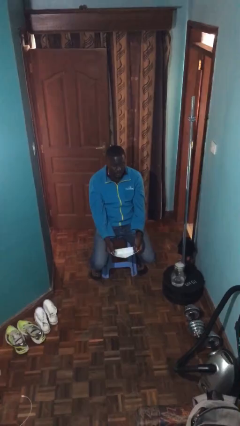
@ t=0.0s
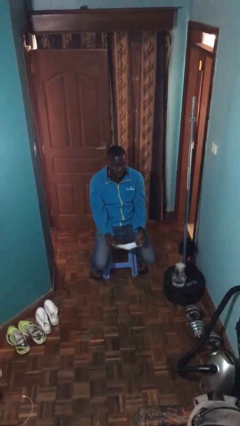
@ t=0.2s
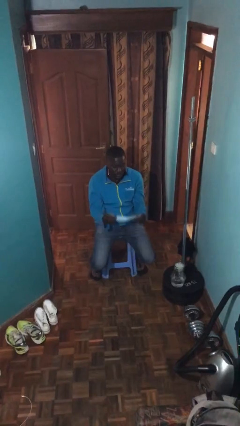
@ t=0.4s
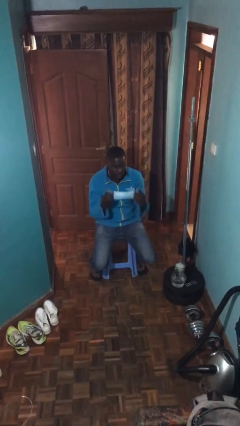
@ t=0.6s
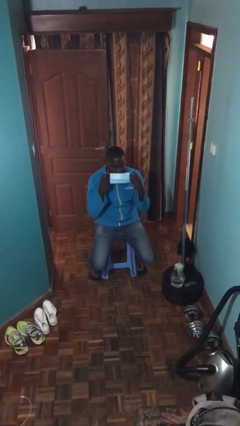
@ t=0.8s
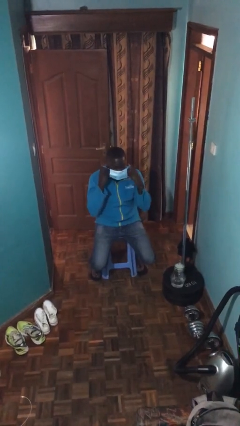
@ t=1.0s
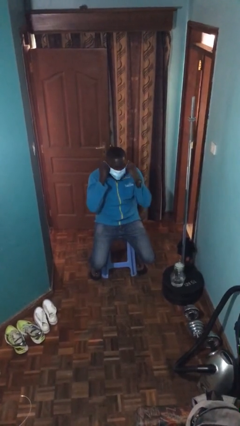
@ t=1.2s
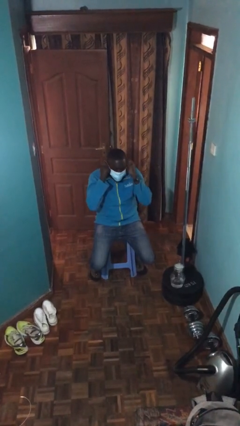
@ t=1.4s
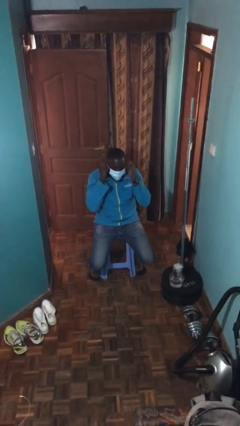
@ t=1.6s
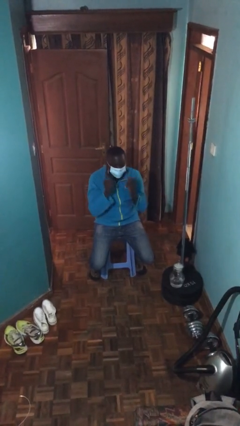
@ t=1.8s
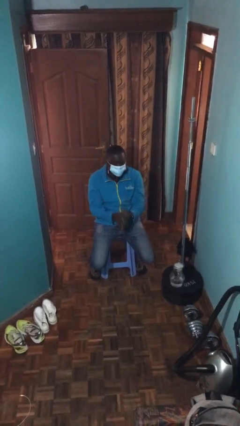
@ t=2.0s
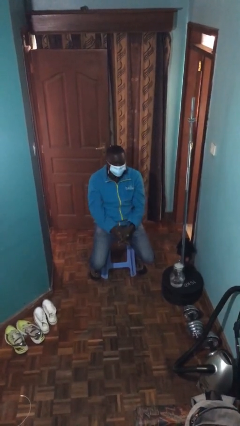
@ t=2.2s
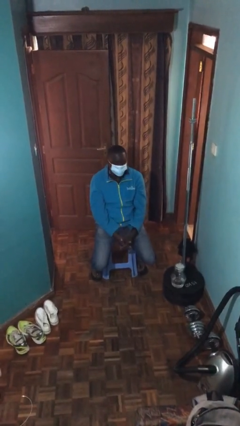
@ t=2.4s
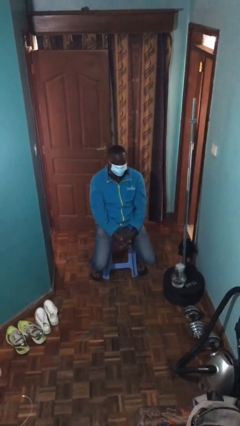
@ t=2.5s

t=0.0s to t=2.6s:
person puts on facemask

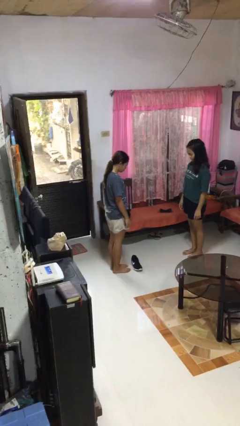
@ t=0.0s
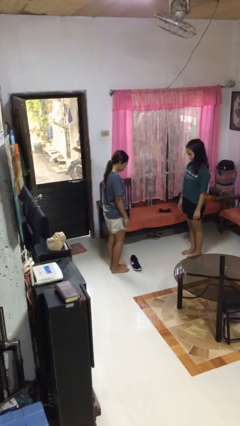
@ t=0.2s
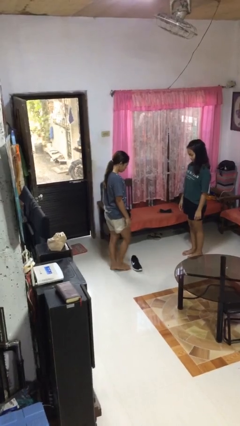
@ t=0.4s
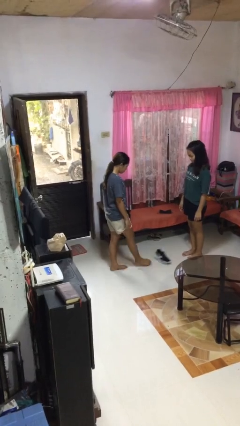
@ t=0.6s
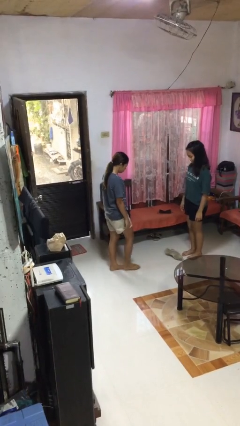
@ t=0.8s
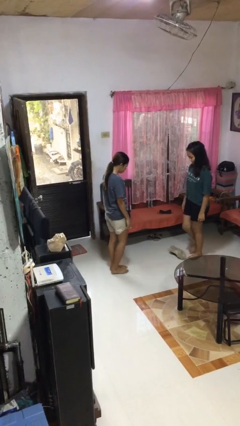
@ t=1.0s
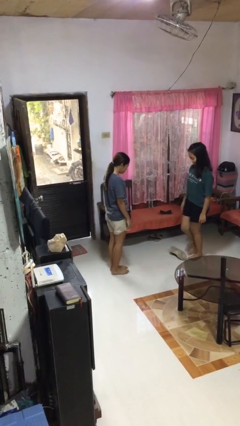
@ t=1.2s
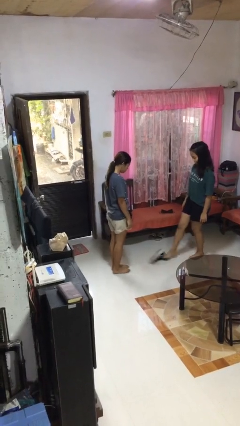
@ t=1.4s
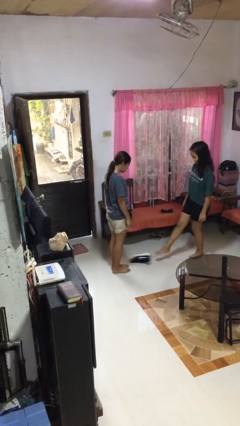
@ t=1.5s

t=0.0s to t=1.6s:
person kicks object to person

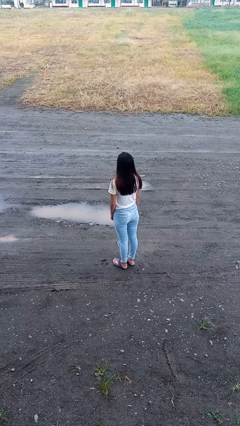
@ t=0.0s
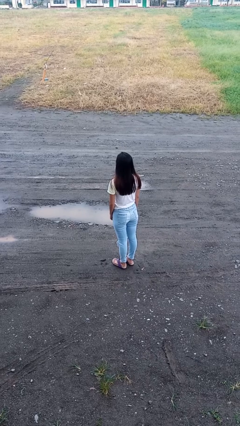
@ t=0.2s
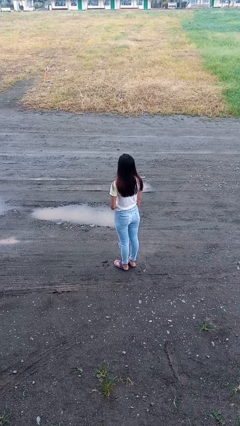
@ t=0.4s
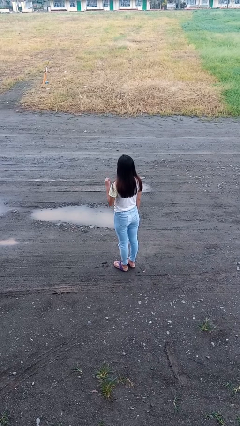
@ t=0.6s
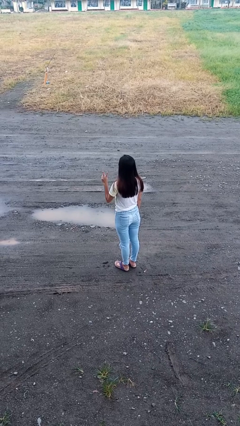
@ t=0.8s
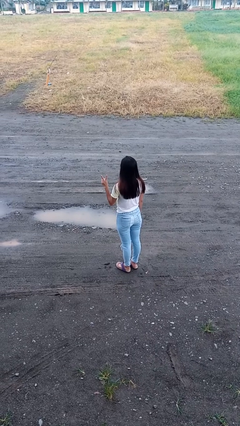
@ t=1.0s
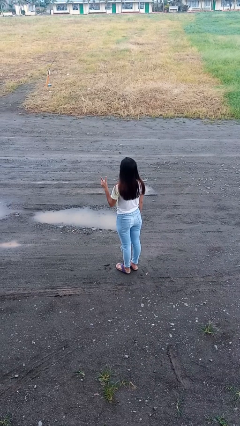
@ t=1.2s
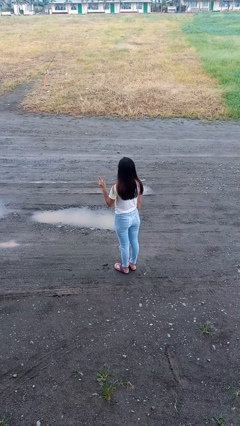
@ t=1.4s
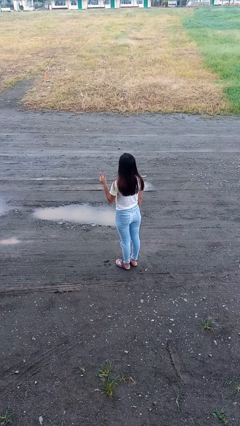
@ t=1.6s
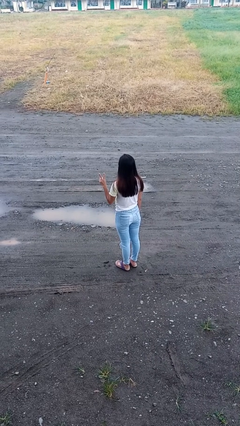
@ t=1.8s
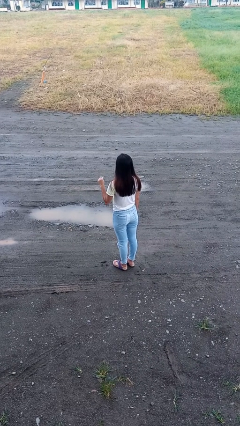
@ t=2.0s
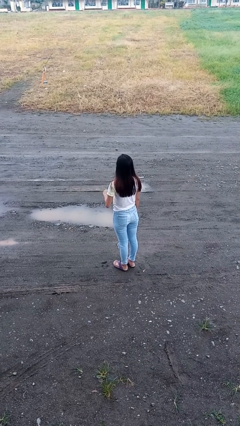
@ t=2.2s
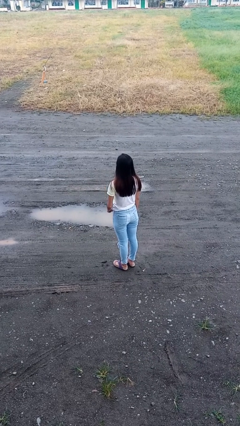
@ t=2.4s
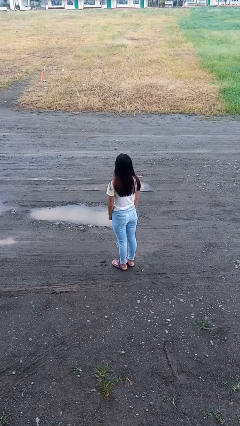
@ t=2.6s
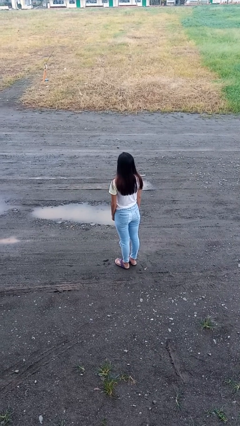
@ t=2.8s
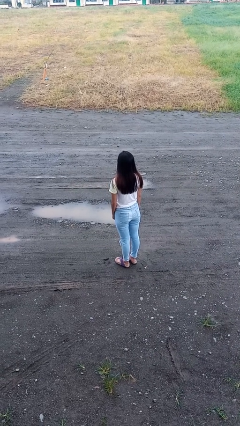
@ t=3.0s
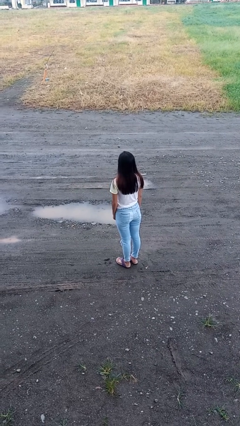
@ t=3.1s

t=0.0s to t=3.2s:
person gestures peace

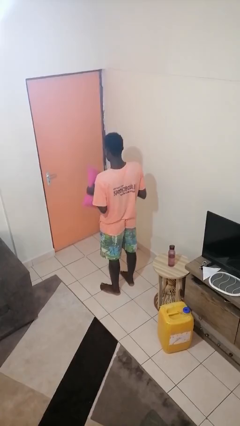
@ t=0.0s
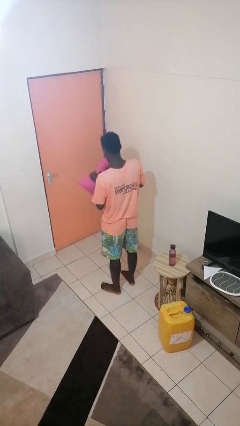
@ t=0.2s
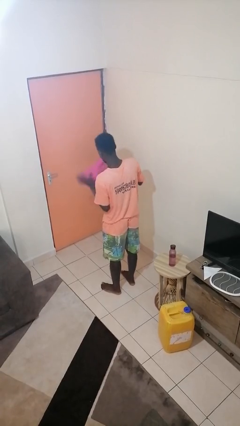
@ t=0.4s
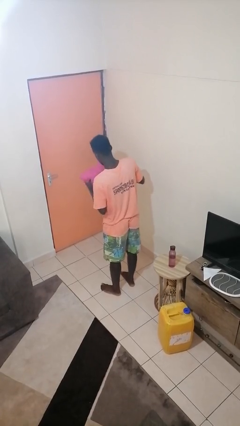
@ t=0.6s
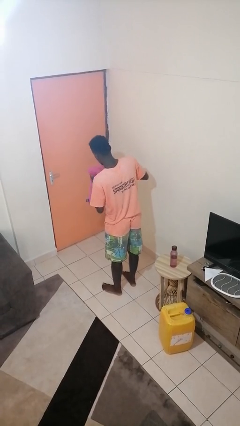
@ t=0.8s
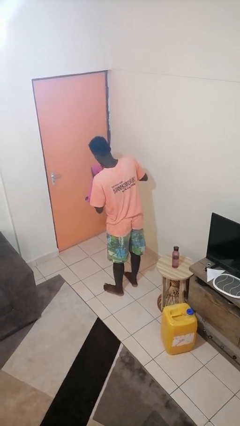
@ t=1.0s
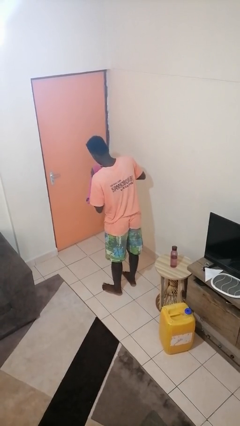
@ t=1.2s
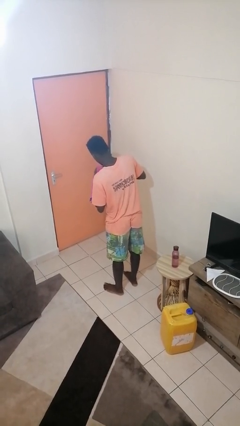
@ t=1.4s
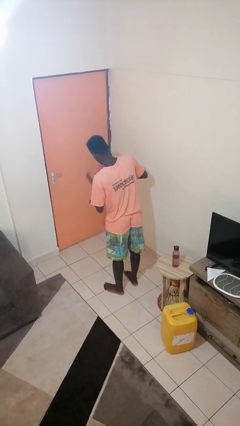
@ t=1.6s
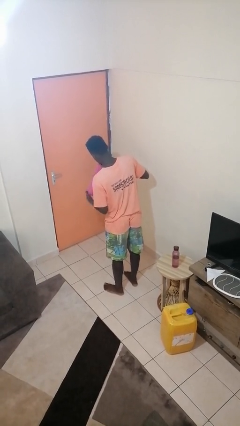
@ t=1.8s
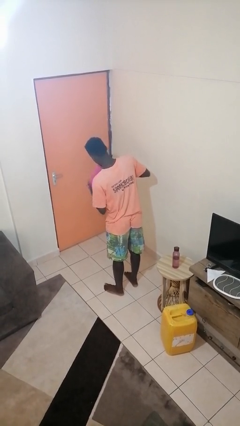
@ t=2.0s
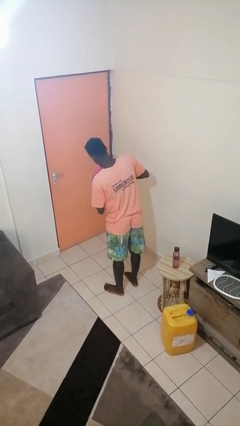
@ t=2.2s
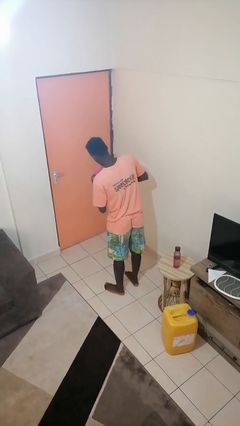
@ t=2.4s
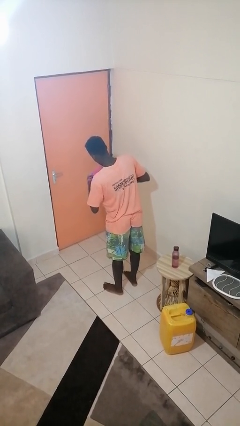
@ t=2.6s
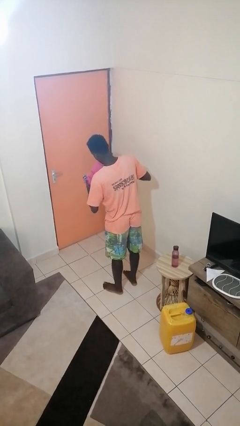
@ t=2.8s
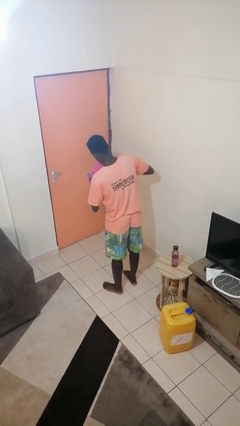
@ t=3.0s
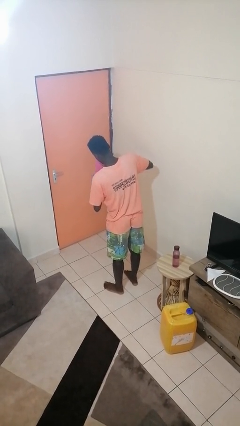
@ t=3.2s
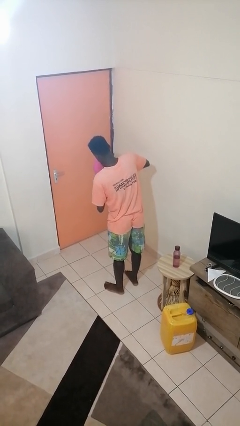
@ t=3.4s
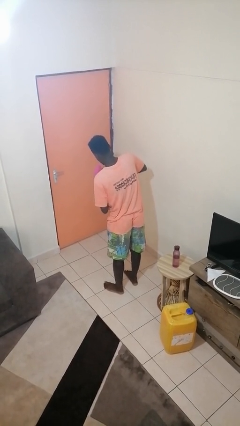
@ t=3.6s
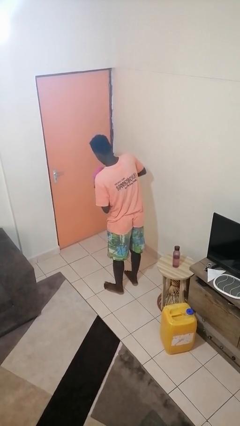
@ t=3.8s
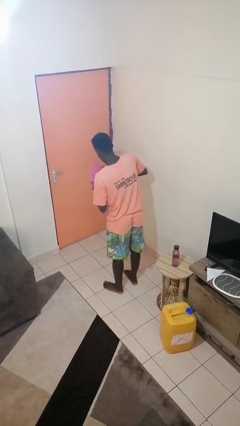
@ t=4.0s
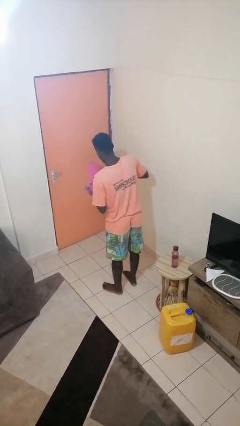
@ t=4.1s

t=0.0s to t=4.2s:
person squeezes object

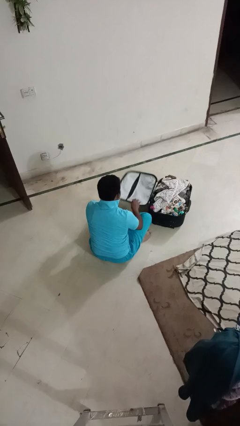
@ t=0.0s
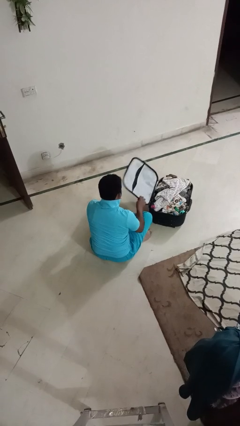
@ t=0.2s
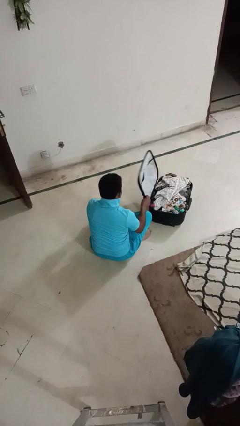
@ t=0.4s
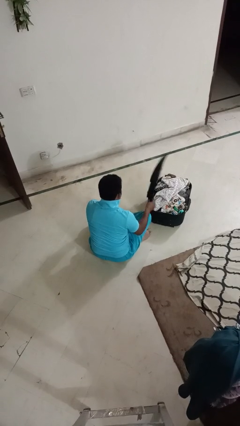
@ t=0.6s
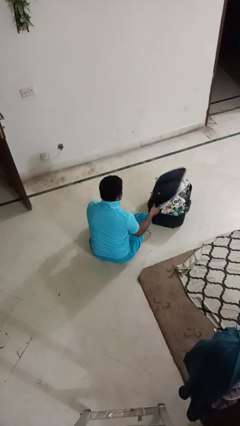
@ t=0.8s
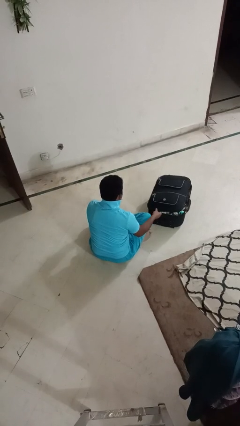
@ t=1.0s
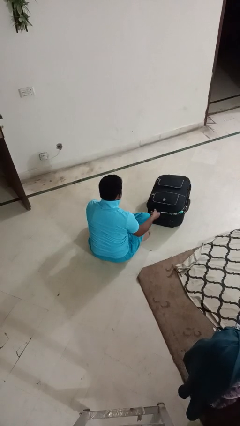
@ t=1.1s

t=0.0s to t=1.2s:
person closes suitcase

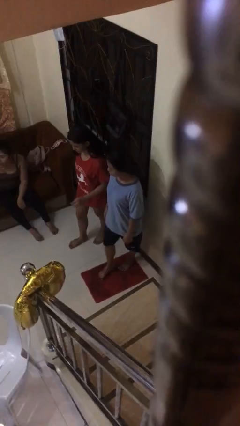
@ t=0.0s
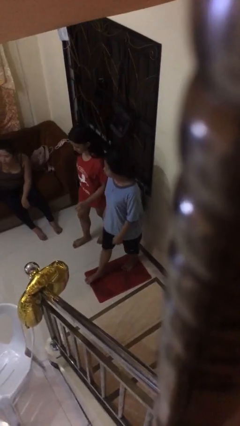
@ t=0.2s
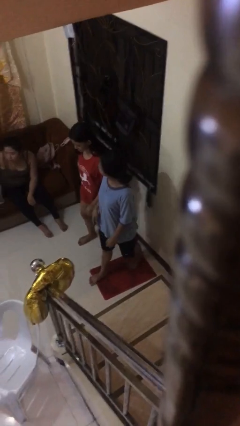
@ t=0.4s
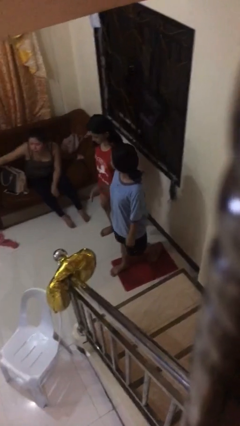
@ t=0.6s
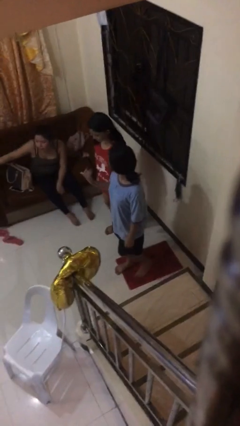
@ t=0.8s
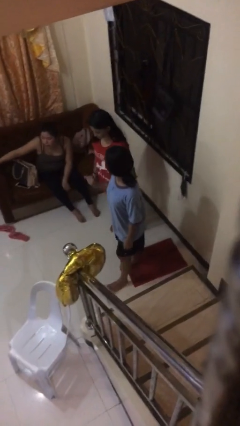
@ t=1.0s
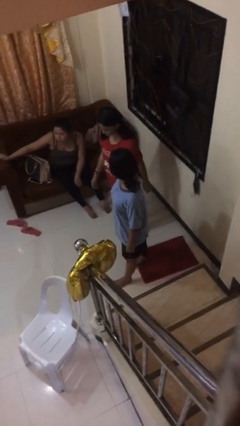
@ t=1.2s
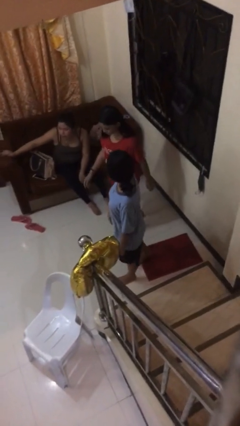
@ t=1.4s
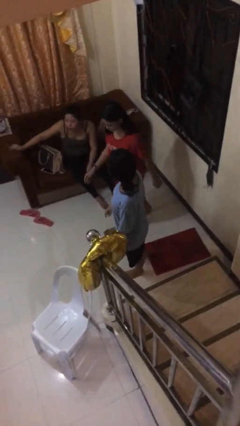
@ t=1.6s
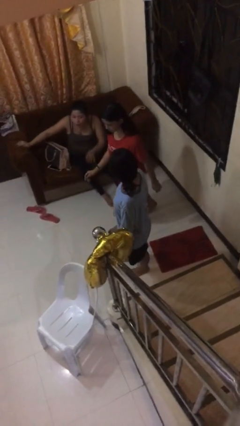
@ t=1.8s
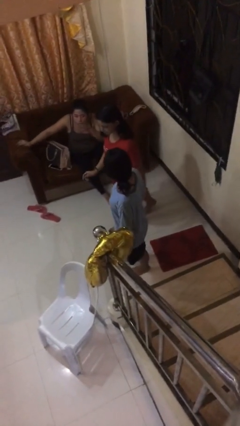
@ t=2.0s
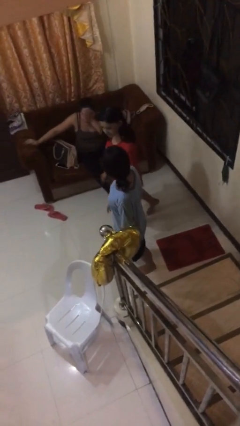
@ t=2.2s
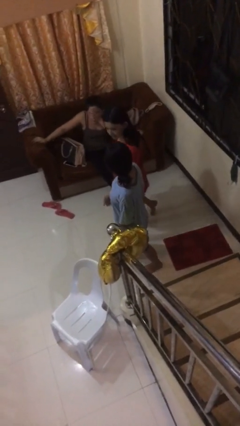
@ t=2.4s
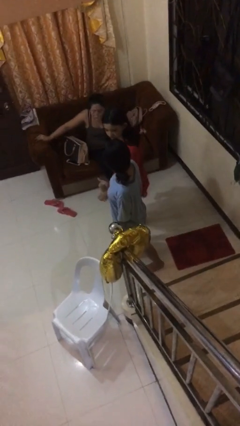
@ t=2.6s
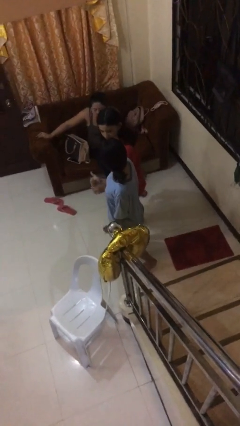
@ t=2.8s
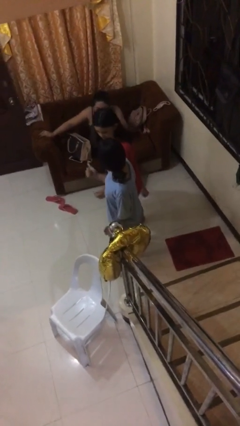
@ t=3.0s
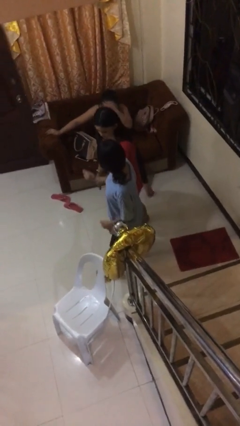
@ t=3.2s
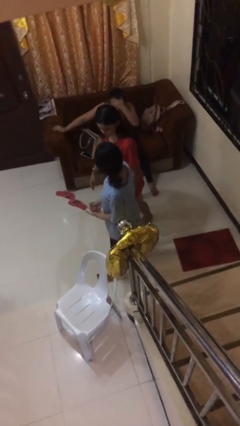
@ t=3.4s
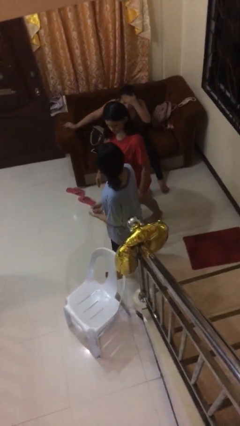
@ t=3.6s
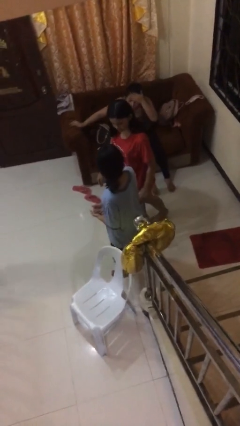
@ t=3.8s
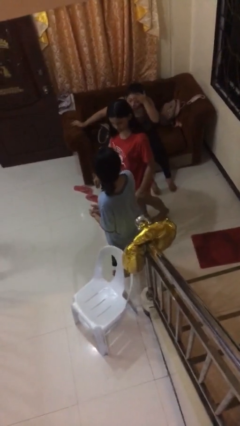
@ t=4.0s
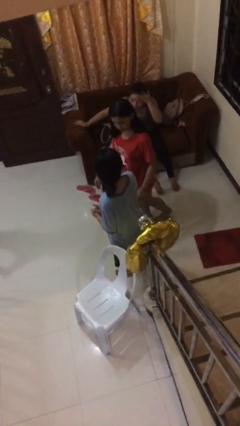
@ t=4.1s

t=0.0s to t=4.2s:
person talks to person

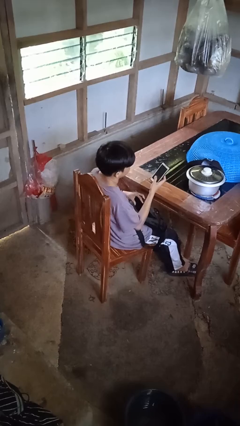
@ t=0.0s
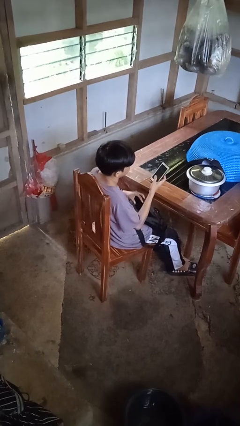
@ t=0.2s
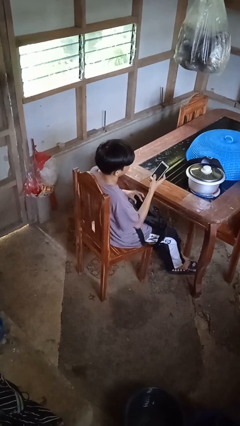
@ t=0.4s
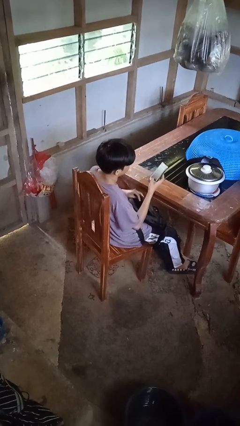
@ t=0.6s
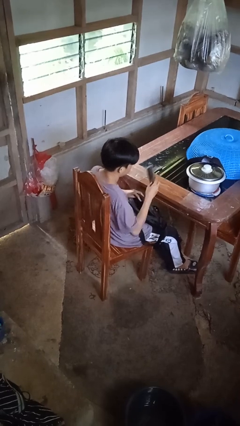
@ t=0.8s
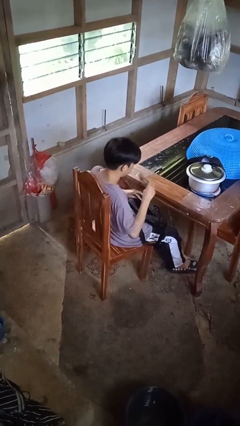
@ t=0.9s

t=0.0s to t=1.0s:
person puts object into purse
